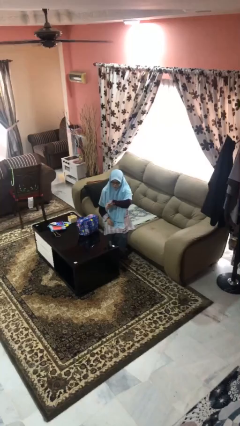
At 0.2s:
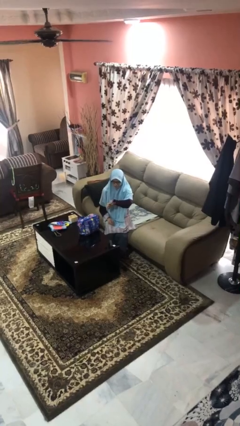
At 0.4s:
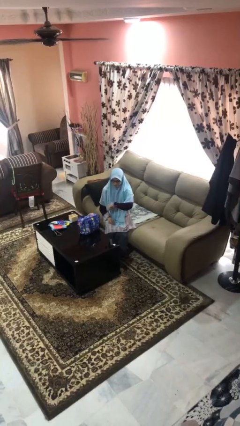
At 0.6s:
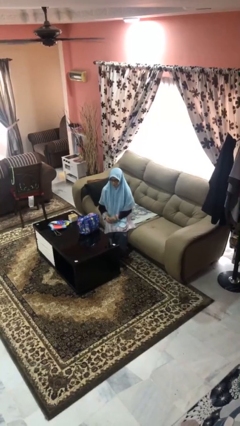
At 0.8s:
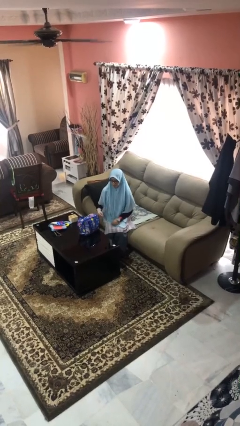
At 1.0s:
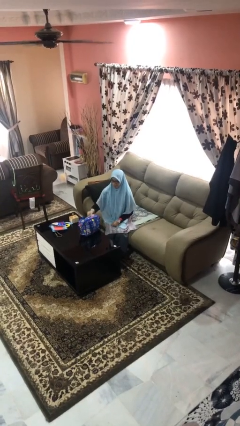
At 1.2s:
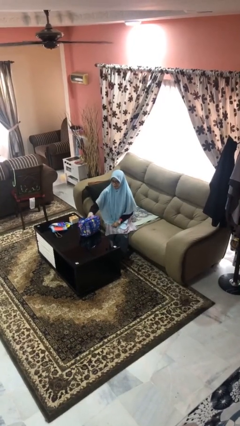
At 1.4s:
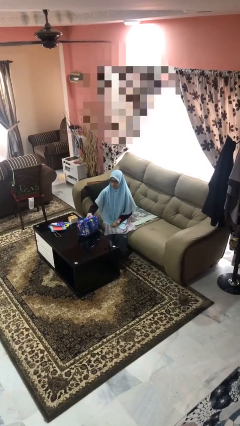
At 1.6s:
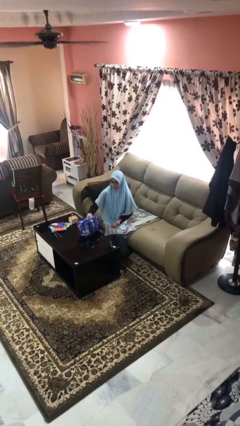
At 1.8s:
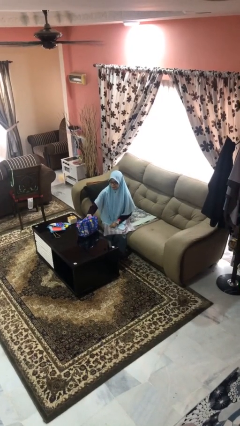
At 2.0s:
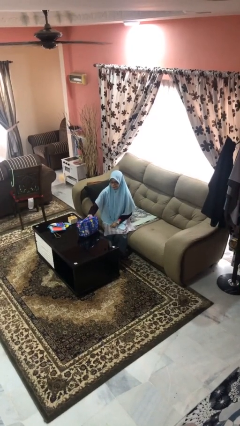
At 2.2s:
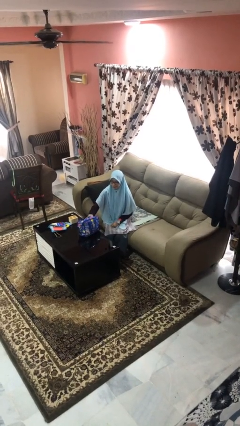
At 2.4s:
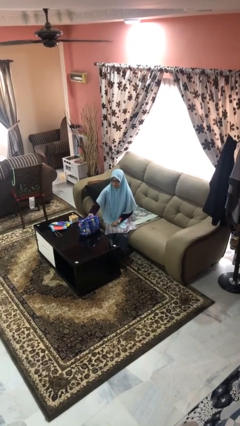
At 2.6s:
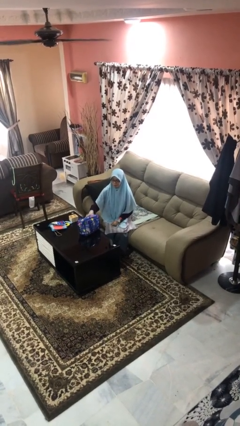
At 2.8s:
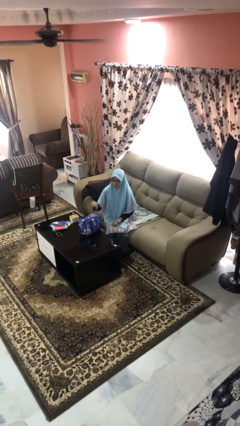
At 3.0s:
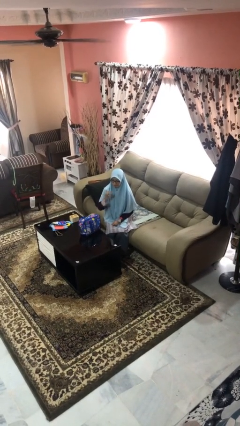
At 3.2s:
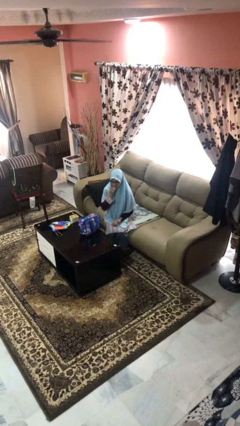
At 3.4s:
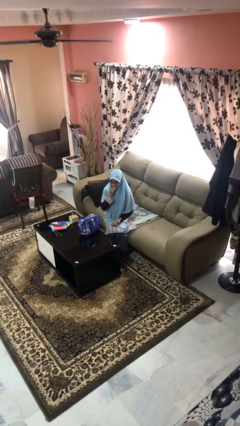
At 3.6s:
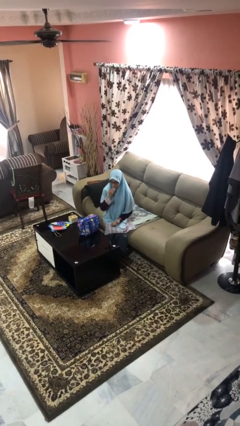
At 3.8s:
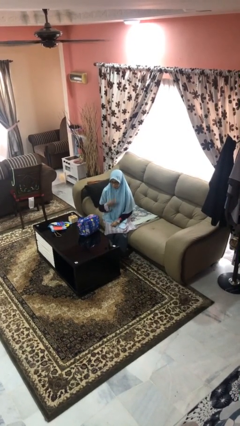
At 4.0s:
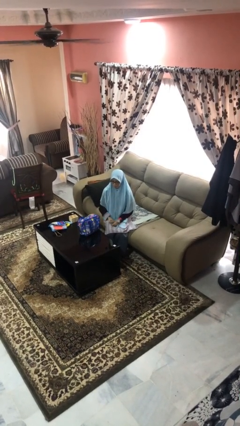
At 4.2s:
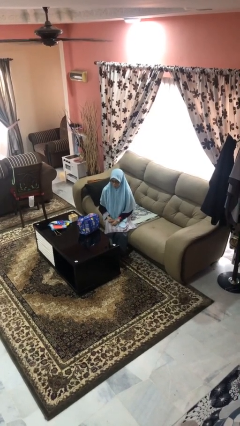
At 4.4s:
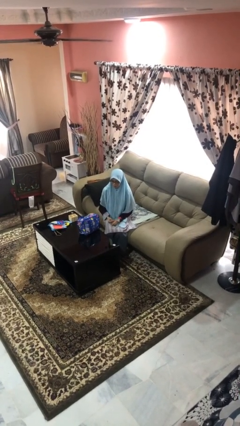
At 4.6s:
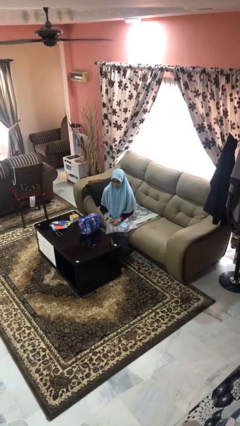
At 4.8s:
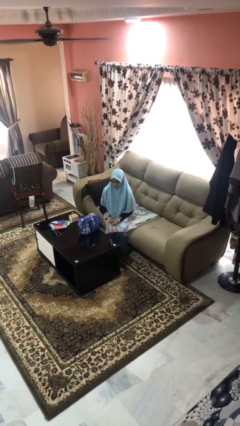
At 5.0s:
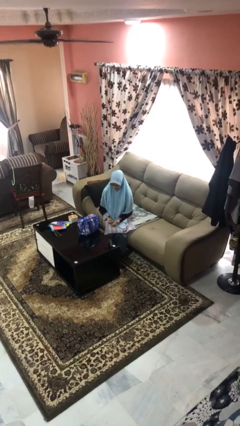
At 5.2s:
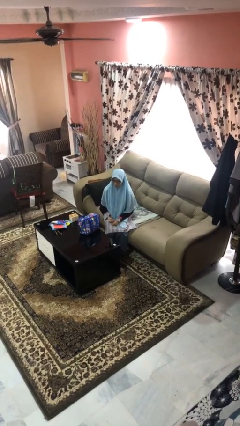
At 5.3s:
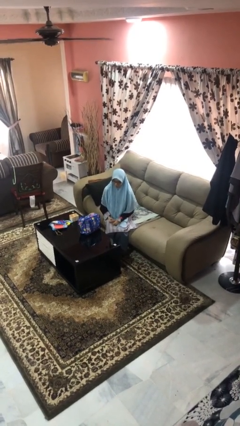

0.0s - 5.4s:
person eats snack from bag

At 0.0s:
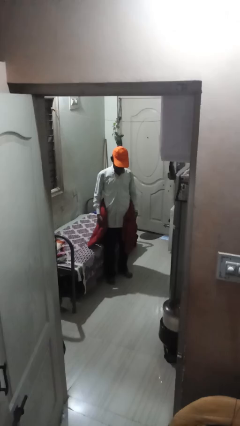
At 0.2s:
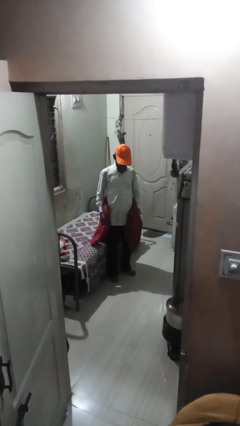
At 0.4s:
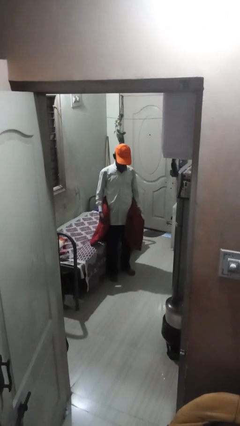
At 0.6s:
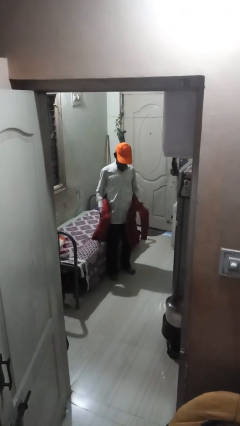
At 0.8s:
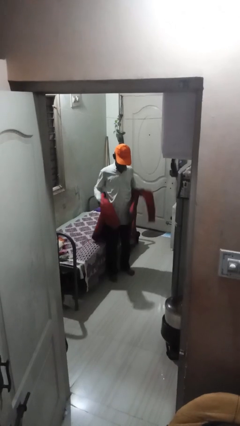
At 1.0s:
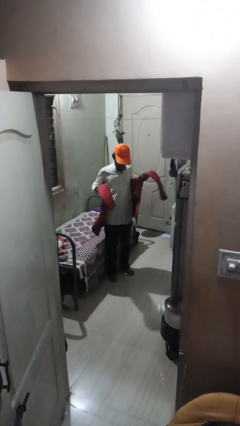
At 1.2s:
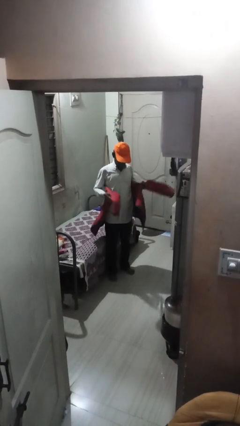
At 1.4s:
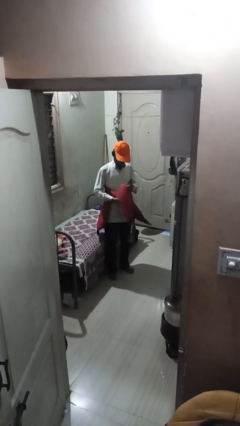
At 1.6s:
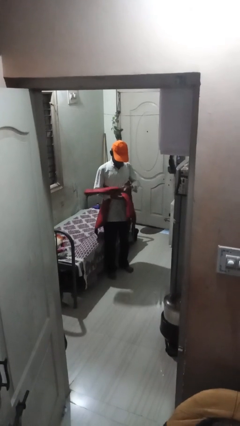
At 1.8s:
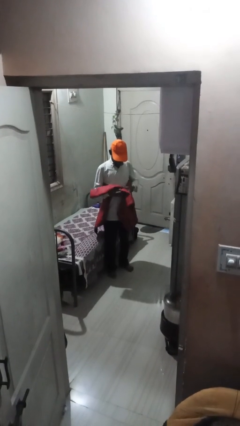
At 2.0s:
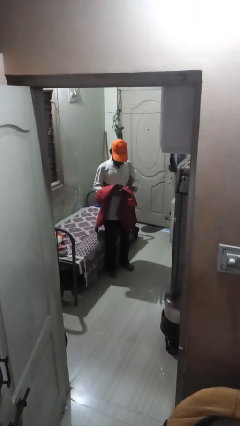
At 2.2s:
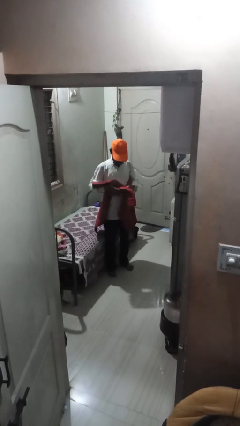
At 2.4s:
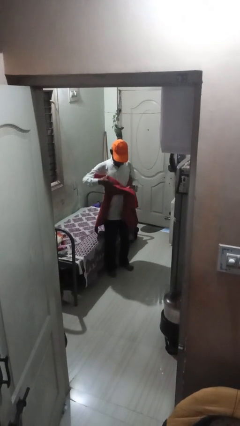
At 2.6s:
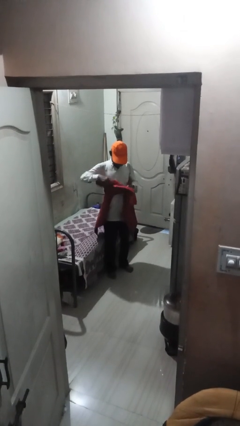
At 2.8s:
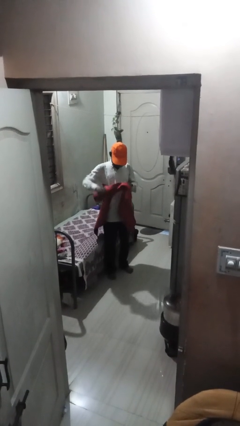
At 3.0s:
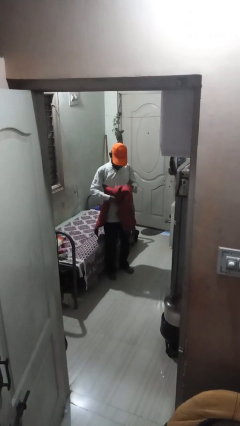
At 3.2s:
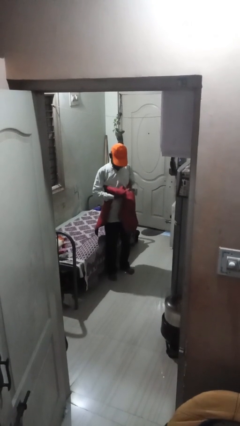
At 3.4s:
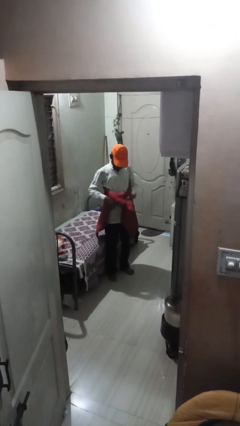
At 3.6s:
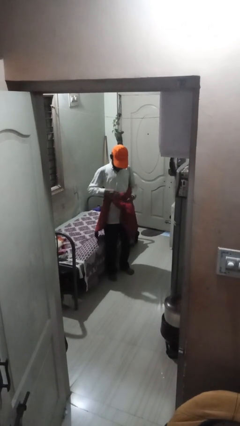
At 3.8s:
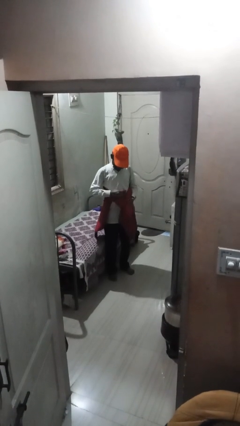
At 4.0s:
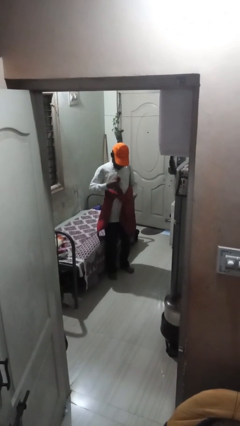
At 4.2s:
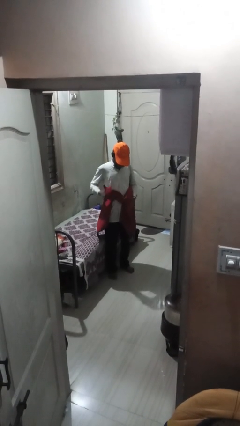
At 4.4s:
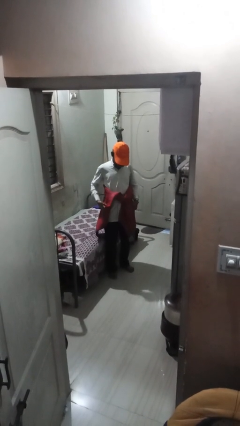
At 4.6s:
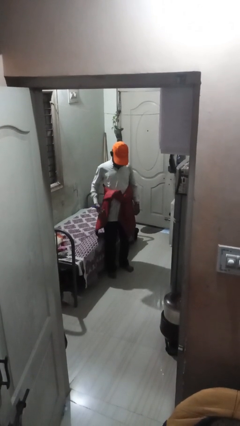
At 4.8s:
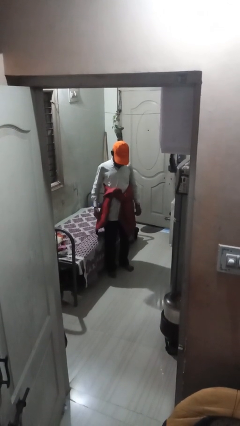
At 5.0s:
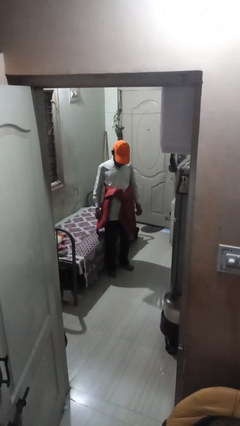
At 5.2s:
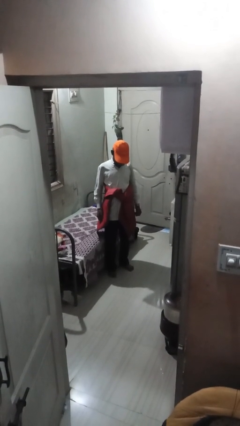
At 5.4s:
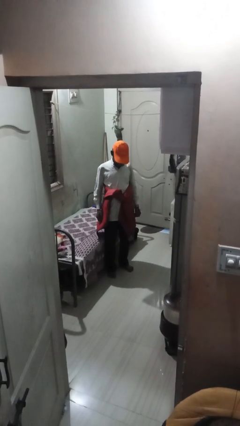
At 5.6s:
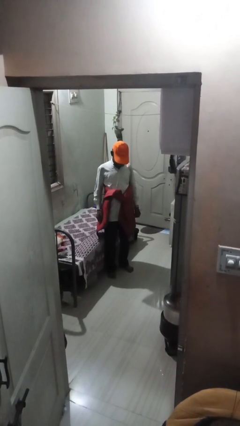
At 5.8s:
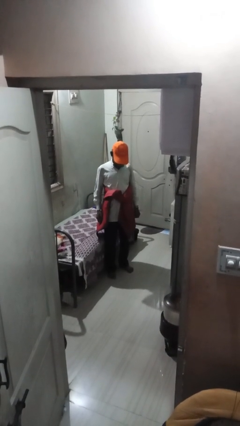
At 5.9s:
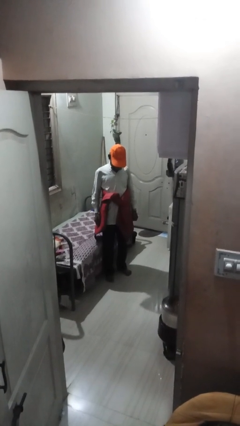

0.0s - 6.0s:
person ties jacket around waist

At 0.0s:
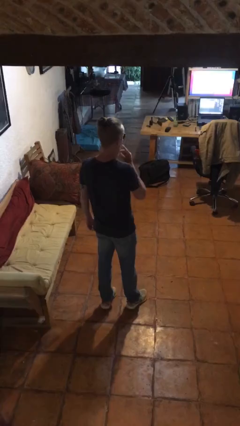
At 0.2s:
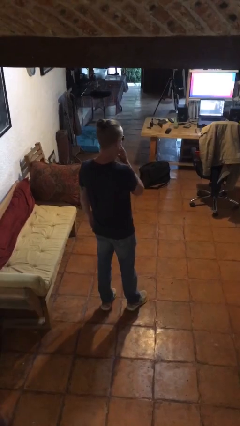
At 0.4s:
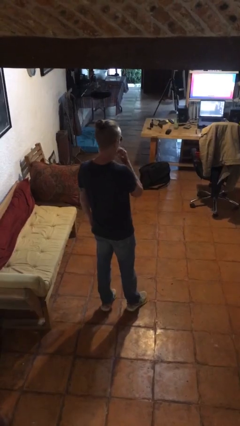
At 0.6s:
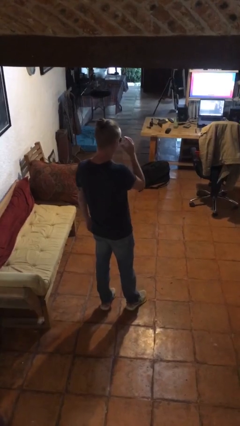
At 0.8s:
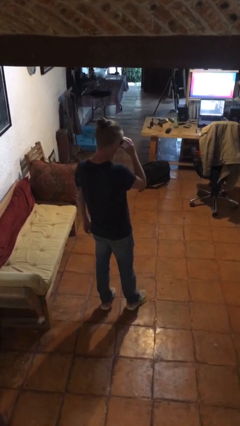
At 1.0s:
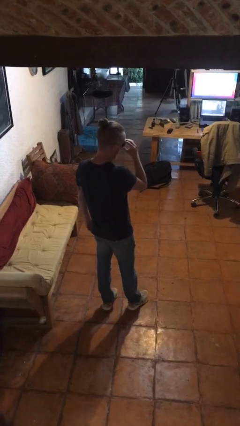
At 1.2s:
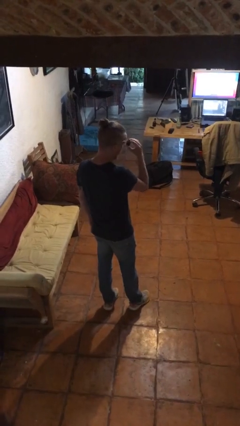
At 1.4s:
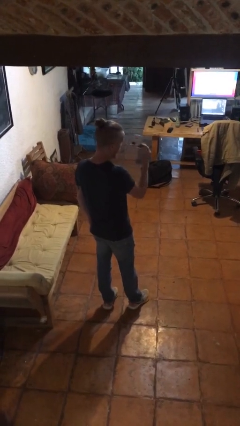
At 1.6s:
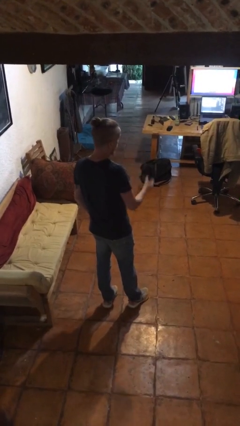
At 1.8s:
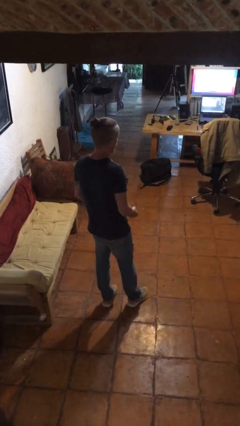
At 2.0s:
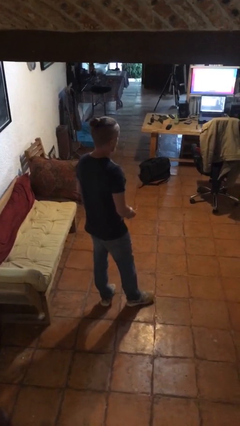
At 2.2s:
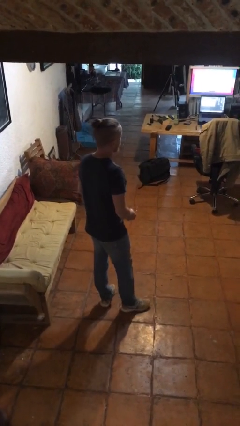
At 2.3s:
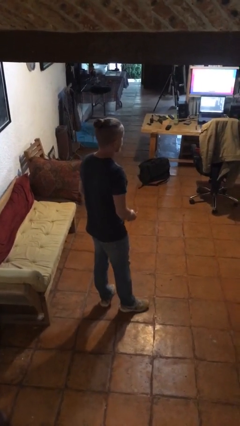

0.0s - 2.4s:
person takes off sunglasses

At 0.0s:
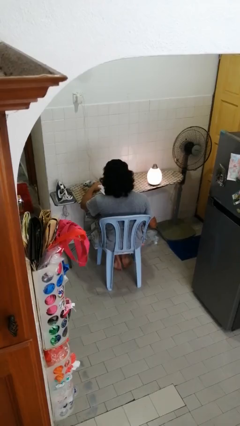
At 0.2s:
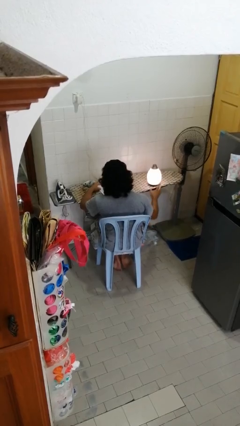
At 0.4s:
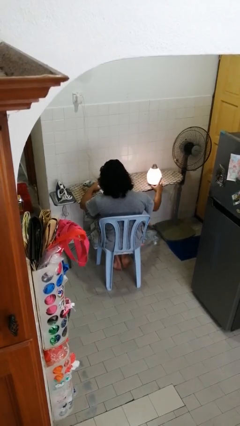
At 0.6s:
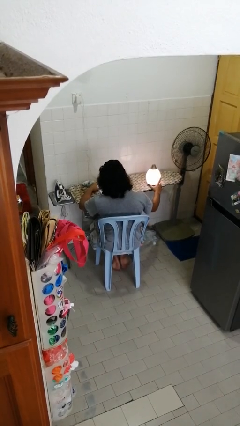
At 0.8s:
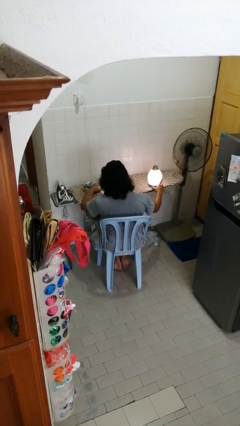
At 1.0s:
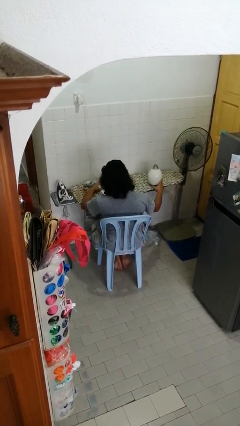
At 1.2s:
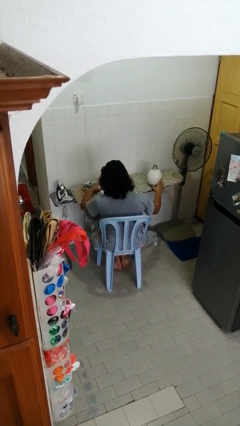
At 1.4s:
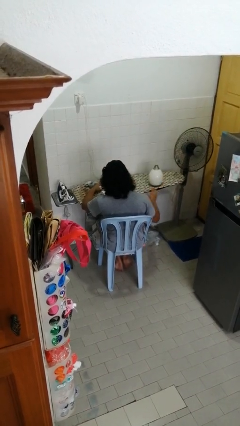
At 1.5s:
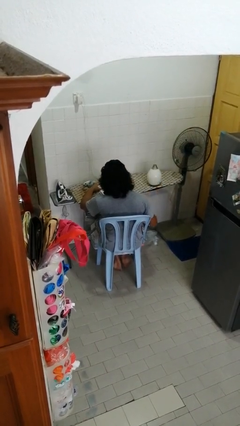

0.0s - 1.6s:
person turns off lamp

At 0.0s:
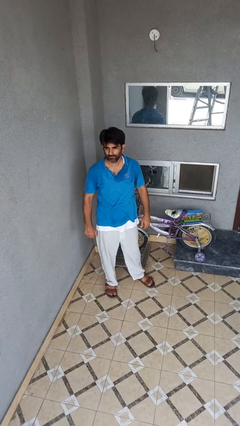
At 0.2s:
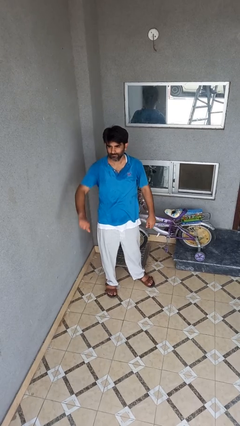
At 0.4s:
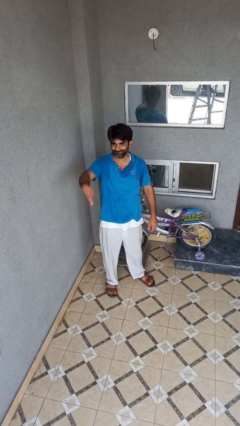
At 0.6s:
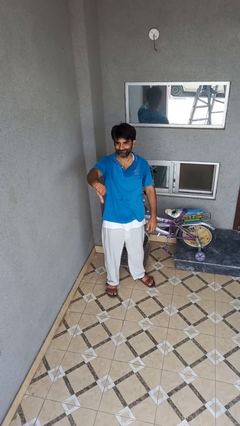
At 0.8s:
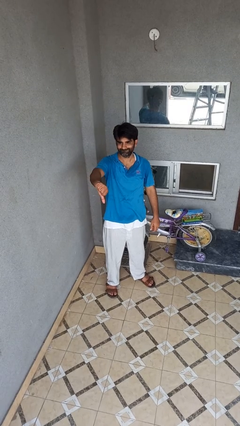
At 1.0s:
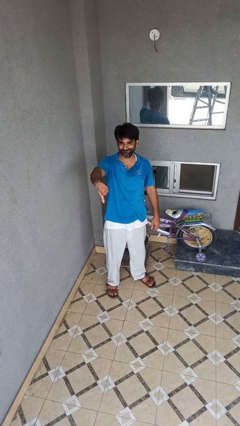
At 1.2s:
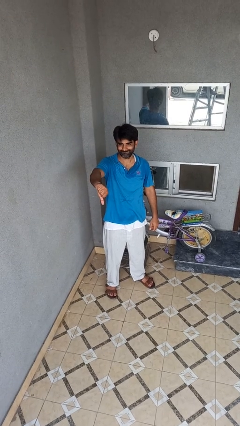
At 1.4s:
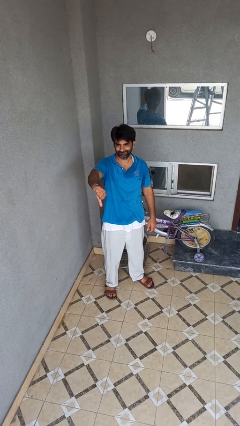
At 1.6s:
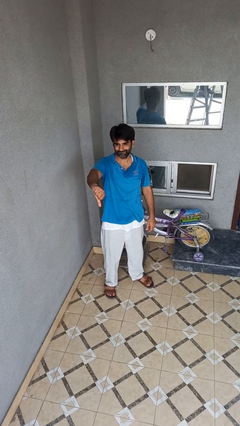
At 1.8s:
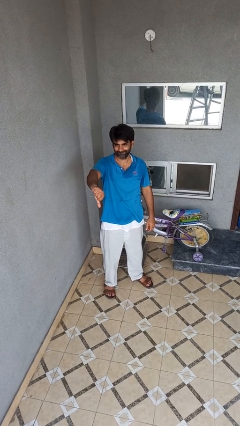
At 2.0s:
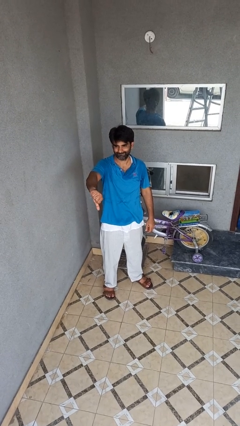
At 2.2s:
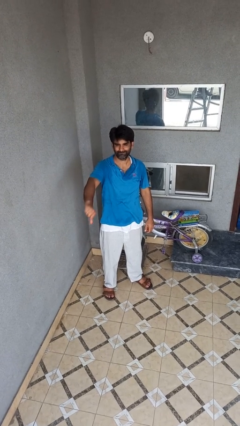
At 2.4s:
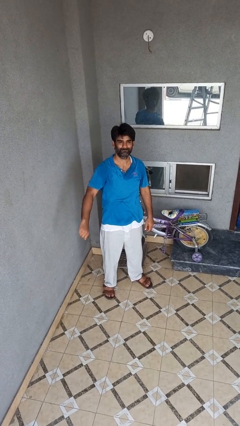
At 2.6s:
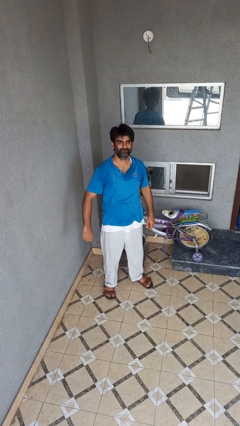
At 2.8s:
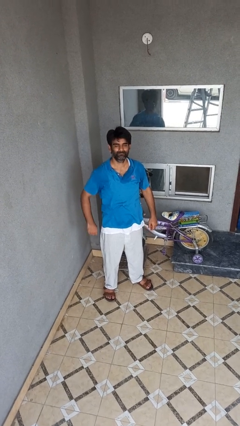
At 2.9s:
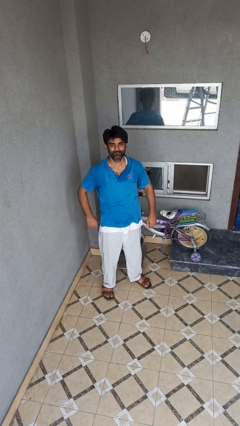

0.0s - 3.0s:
person gestures thumbs down
